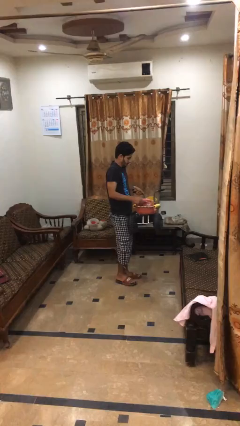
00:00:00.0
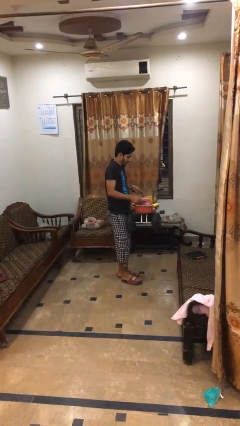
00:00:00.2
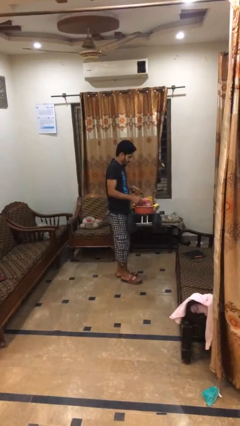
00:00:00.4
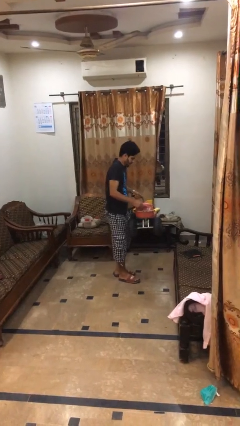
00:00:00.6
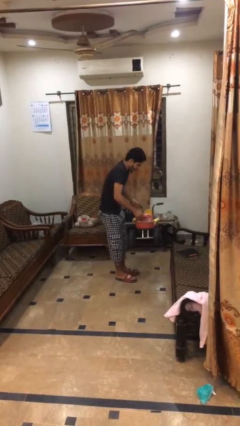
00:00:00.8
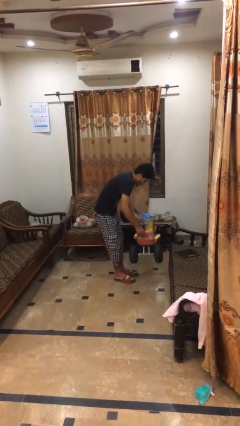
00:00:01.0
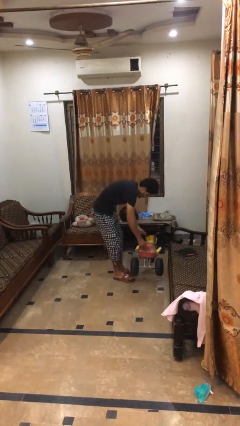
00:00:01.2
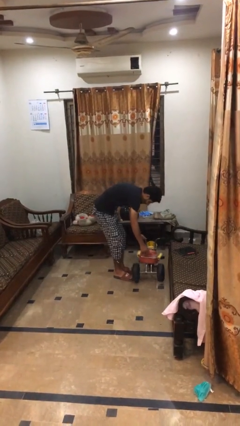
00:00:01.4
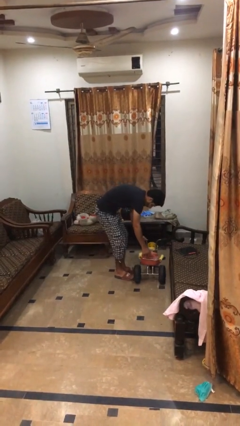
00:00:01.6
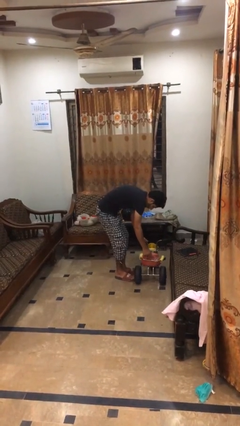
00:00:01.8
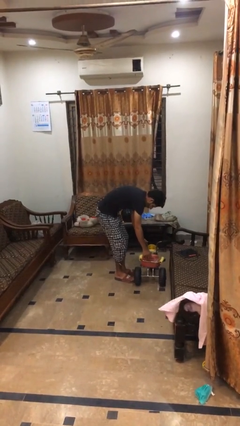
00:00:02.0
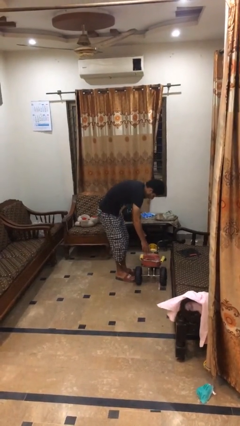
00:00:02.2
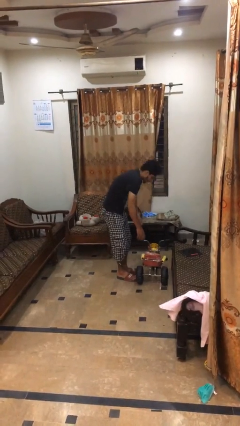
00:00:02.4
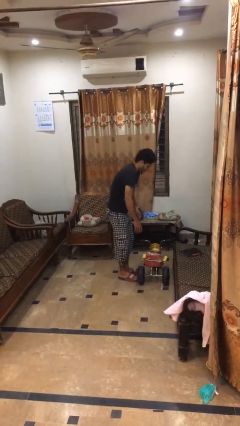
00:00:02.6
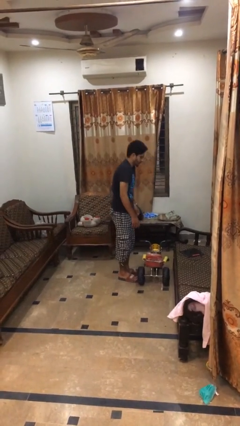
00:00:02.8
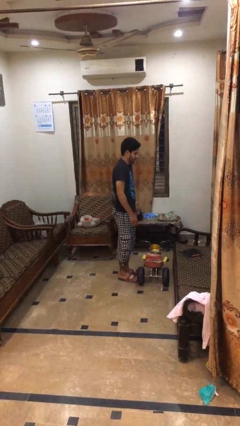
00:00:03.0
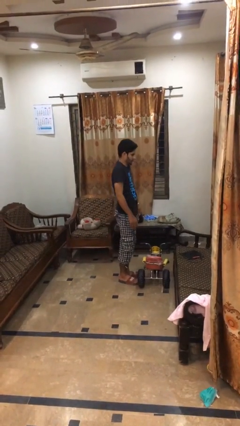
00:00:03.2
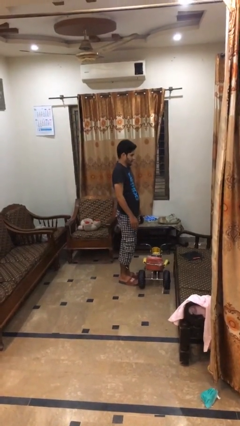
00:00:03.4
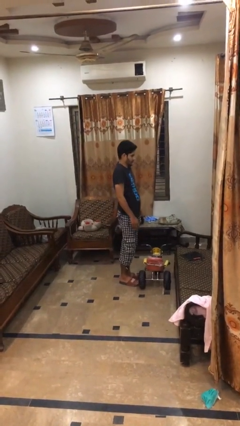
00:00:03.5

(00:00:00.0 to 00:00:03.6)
person puts down object on floor

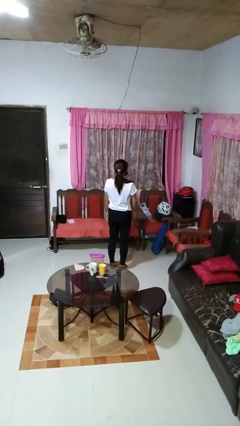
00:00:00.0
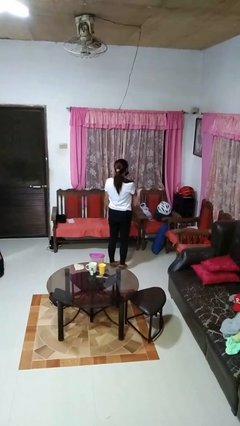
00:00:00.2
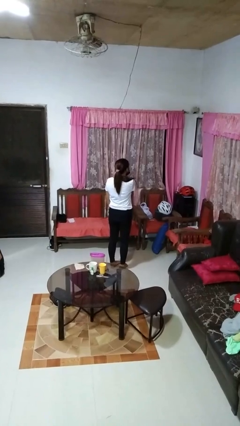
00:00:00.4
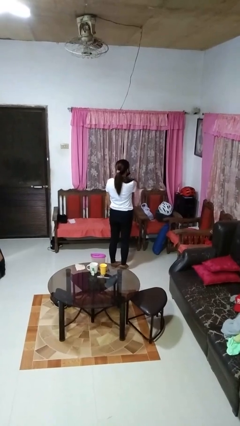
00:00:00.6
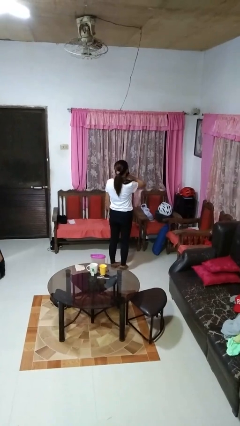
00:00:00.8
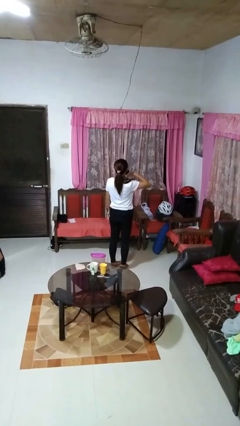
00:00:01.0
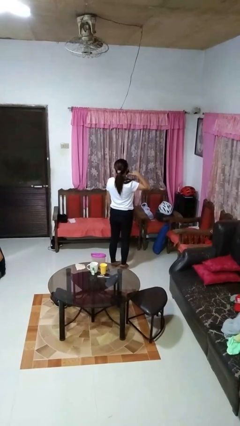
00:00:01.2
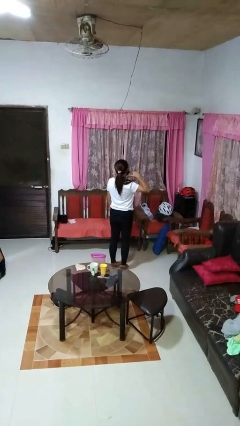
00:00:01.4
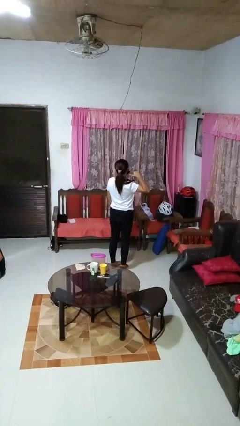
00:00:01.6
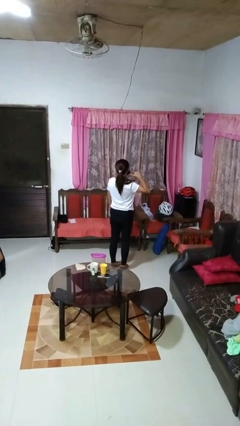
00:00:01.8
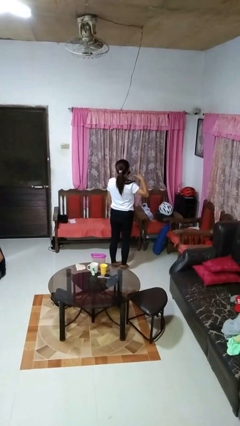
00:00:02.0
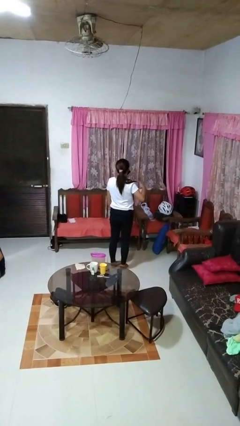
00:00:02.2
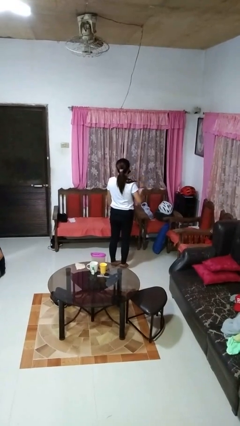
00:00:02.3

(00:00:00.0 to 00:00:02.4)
person gestures cut

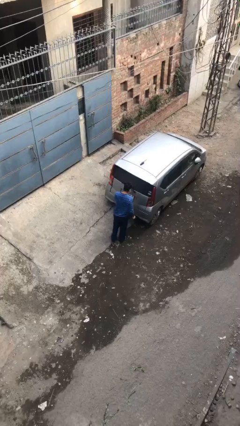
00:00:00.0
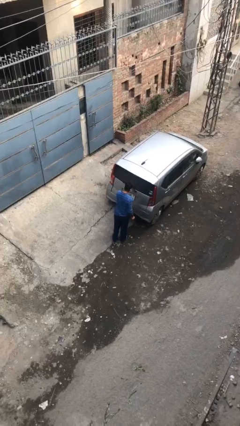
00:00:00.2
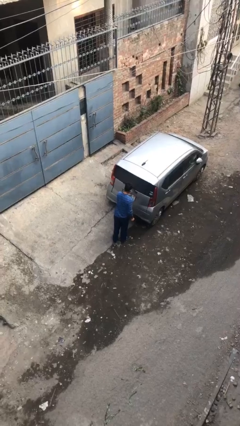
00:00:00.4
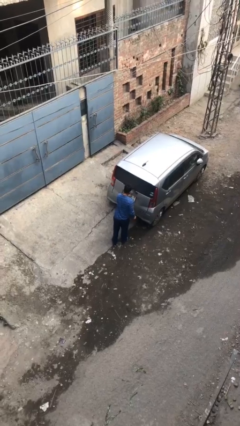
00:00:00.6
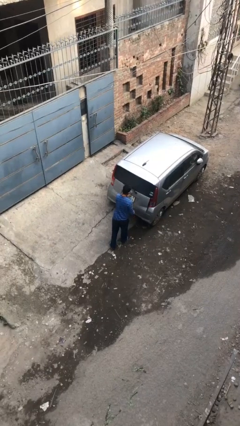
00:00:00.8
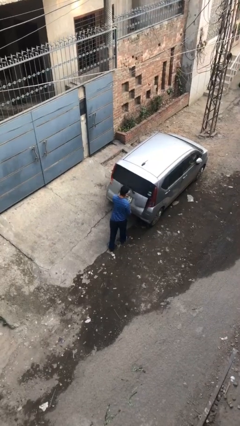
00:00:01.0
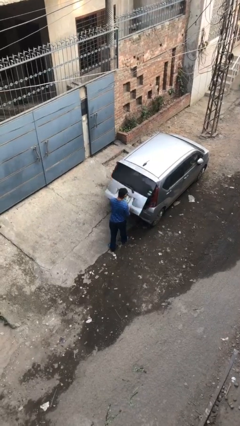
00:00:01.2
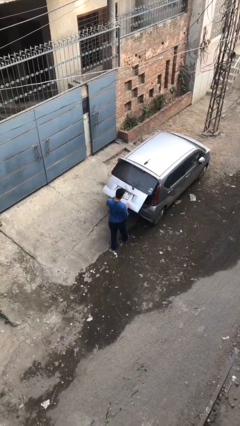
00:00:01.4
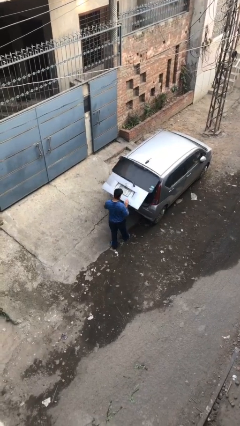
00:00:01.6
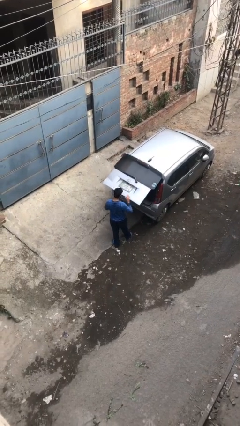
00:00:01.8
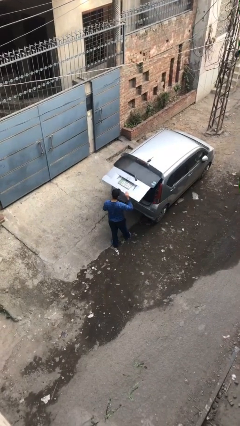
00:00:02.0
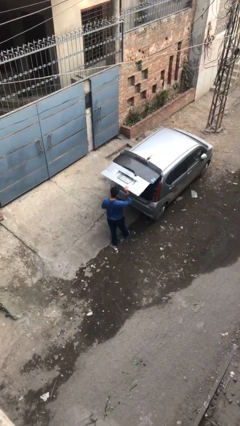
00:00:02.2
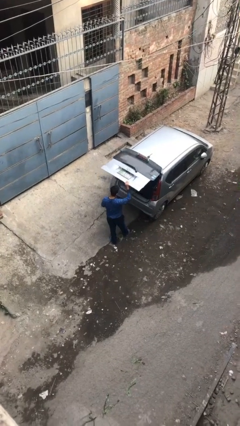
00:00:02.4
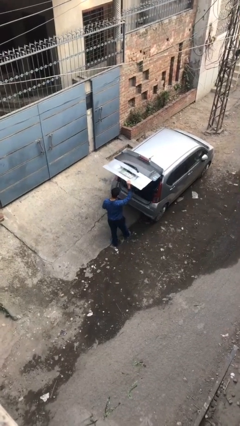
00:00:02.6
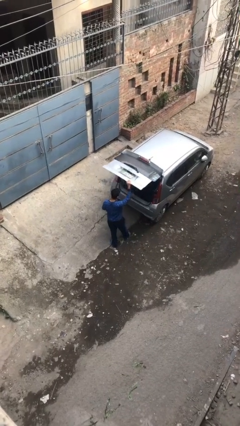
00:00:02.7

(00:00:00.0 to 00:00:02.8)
person opens car trunk

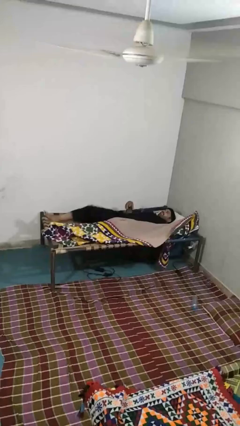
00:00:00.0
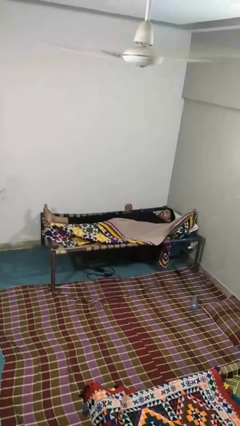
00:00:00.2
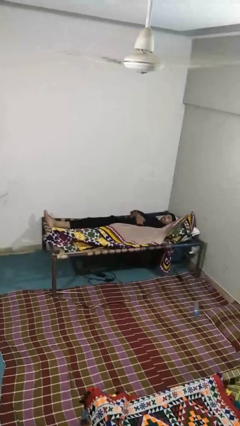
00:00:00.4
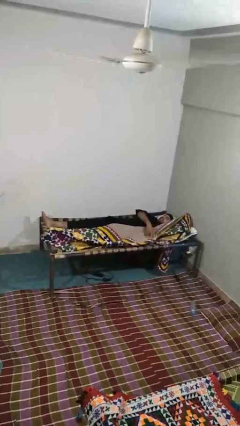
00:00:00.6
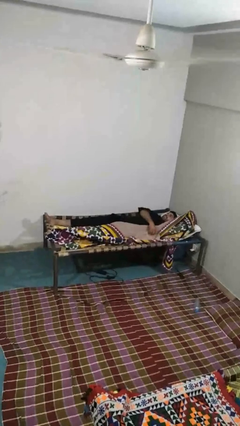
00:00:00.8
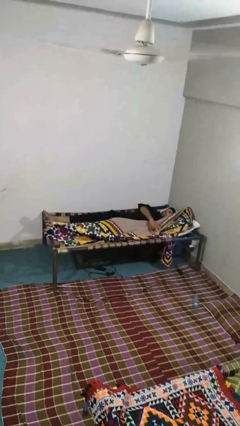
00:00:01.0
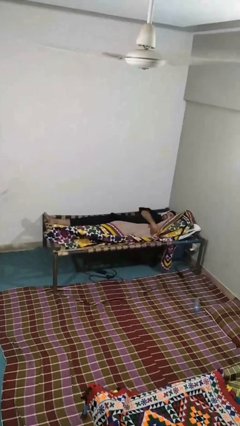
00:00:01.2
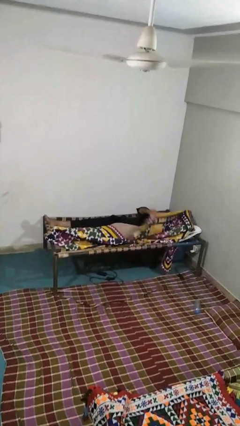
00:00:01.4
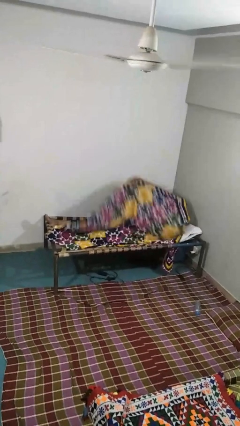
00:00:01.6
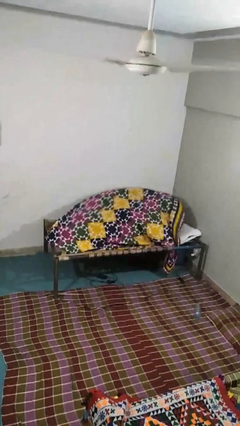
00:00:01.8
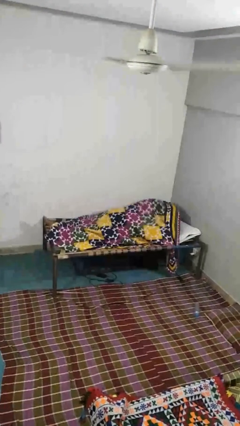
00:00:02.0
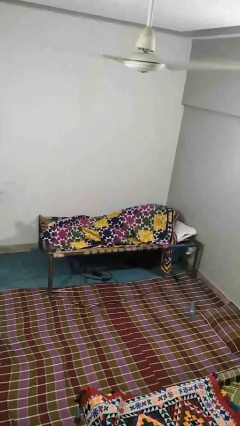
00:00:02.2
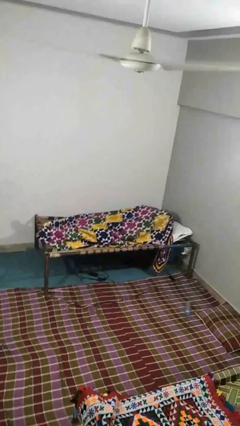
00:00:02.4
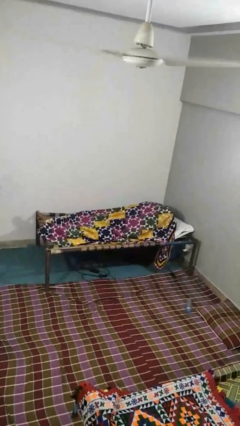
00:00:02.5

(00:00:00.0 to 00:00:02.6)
person covers with blanket

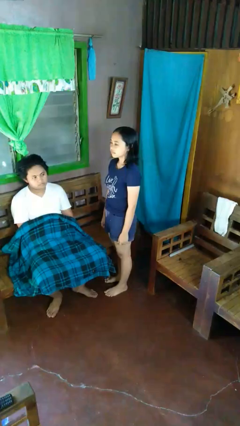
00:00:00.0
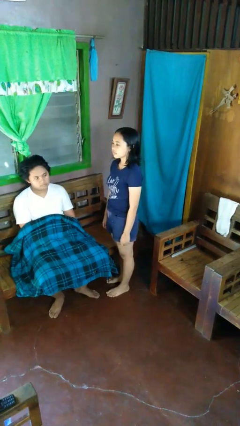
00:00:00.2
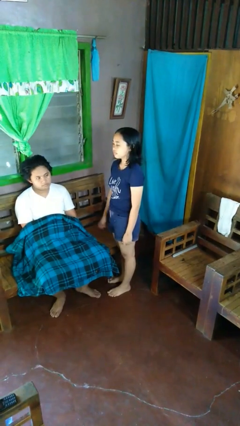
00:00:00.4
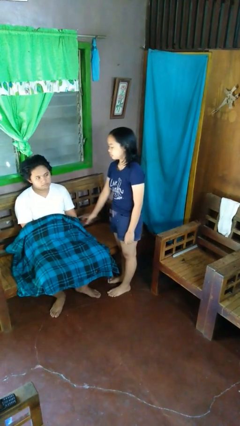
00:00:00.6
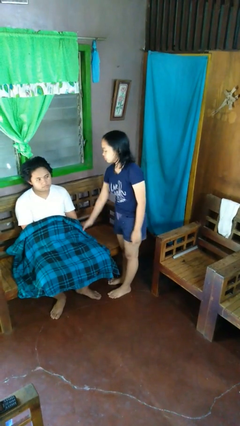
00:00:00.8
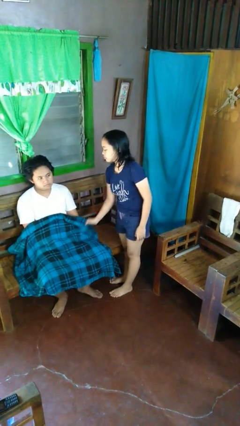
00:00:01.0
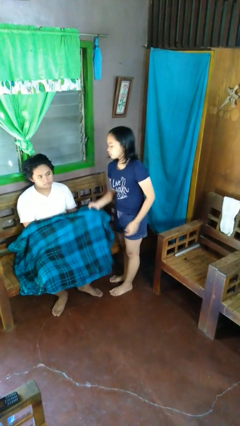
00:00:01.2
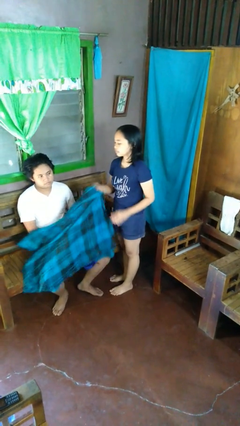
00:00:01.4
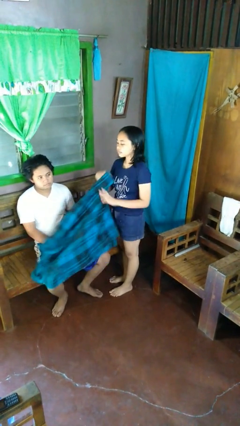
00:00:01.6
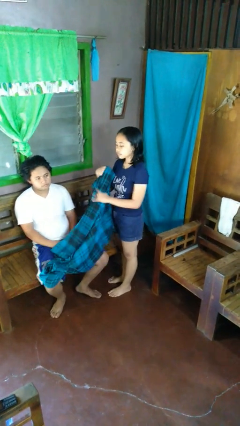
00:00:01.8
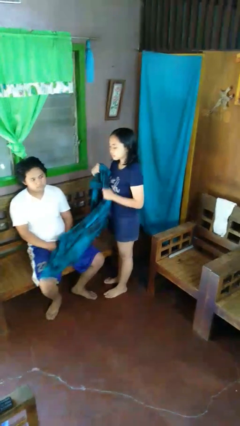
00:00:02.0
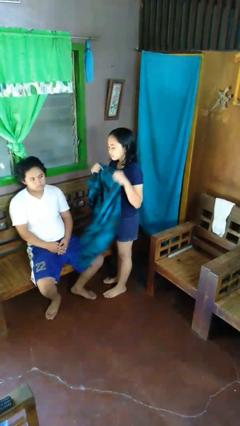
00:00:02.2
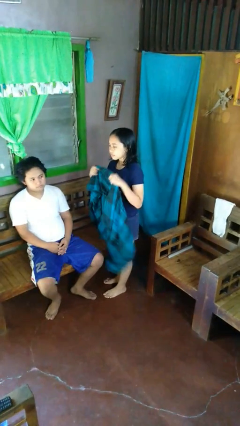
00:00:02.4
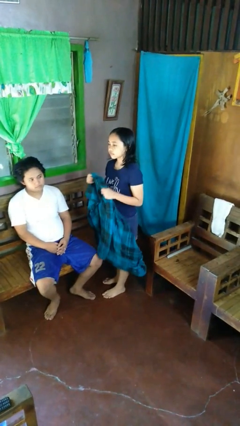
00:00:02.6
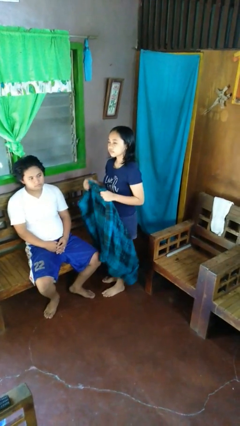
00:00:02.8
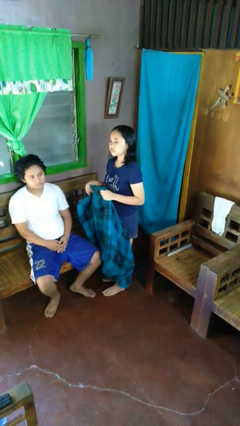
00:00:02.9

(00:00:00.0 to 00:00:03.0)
person uncovers friend with blanket

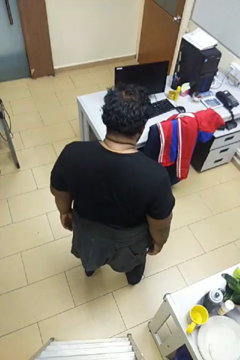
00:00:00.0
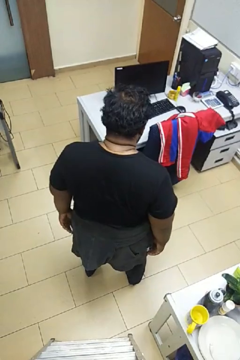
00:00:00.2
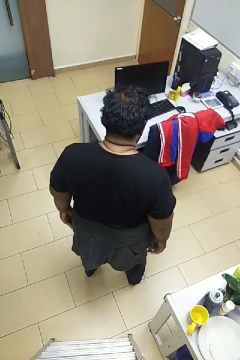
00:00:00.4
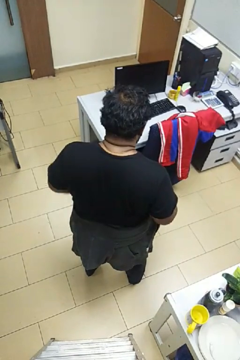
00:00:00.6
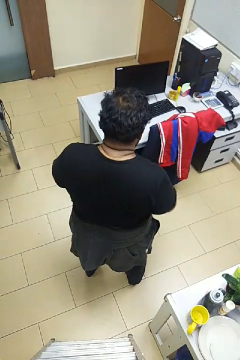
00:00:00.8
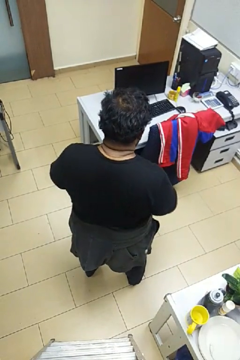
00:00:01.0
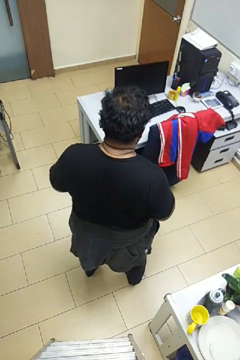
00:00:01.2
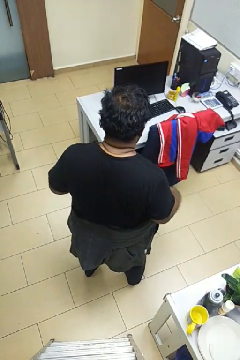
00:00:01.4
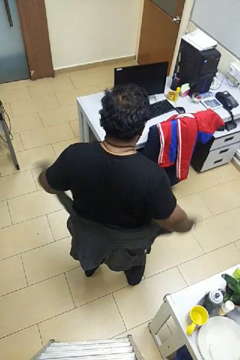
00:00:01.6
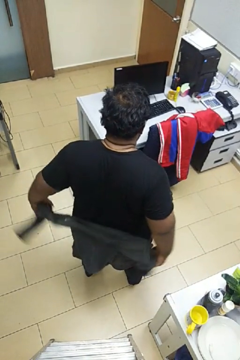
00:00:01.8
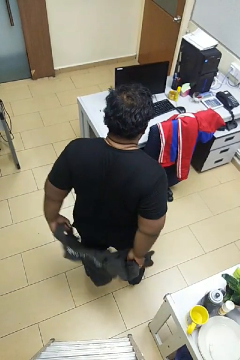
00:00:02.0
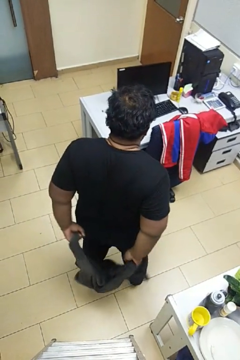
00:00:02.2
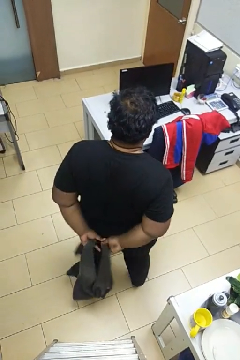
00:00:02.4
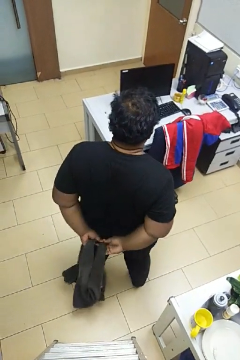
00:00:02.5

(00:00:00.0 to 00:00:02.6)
person unties jacket around waist

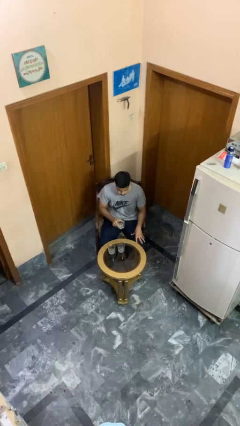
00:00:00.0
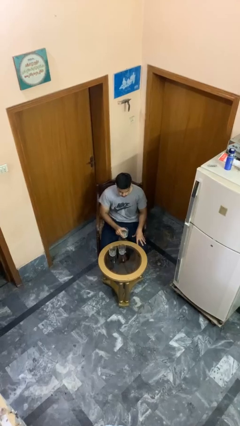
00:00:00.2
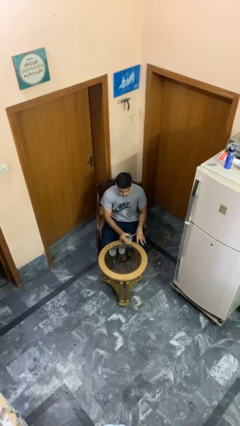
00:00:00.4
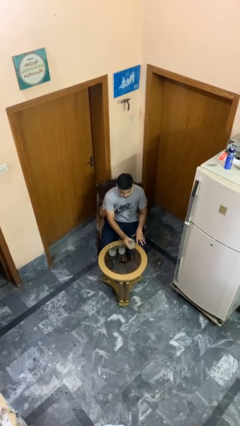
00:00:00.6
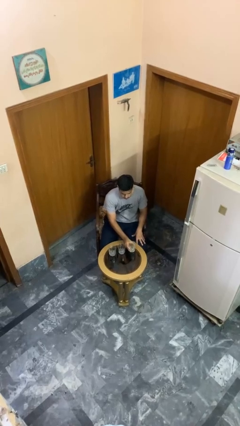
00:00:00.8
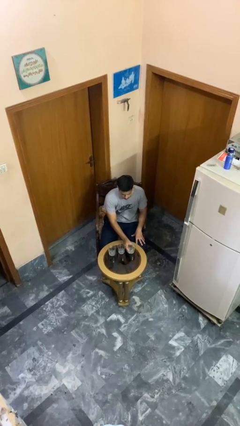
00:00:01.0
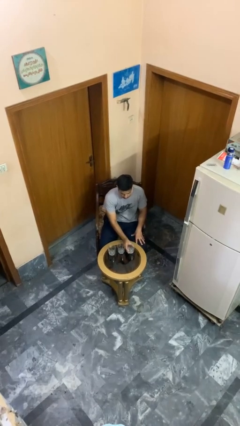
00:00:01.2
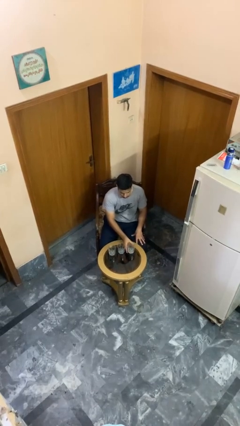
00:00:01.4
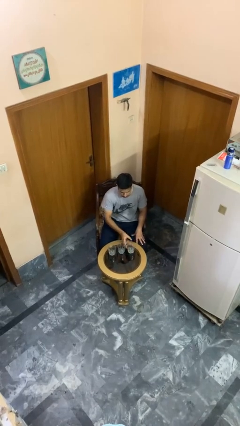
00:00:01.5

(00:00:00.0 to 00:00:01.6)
person puts down object on table
